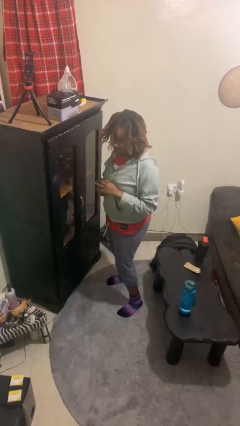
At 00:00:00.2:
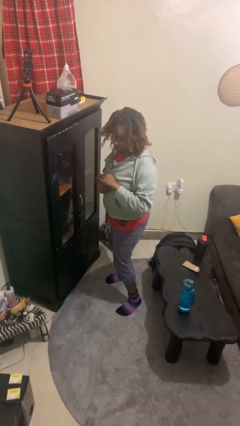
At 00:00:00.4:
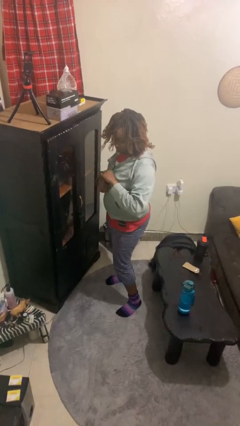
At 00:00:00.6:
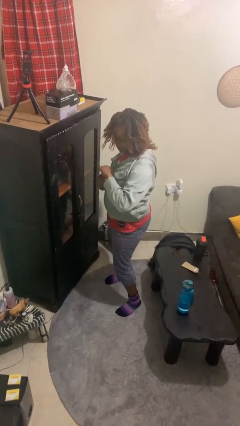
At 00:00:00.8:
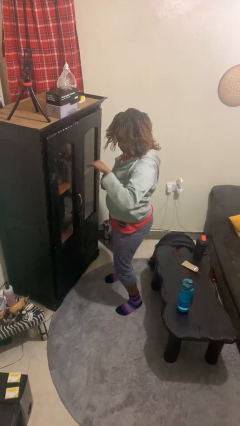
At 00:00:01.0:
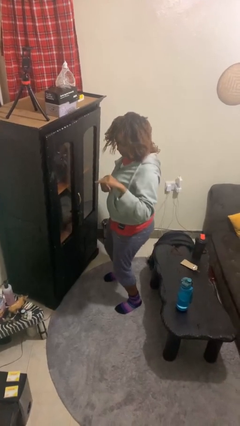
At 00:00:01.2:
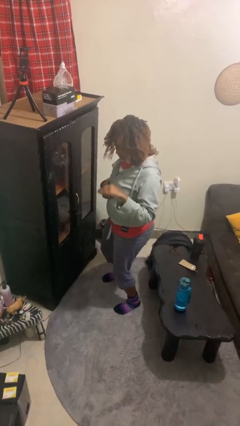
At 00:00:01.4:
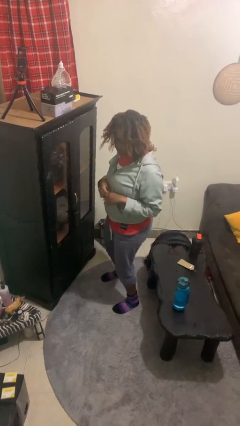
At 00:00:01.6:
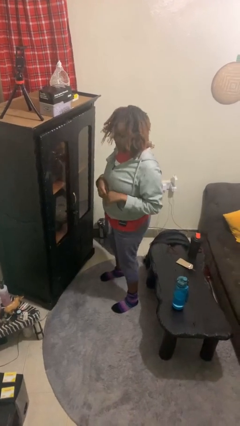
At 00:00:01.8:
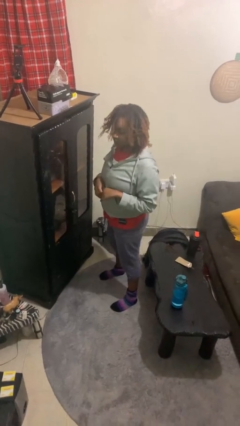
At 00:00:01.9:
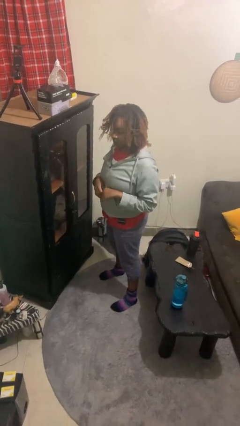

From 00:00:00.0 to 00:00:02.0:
person karate chop

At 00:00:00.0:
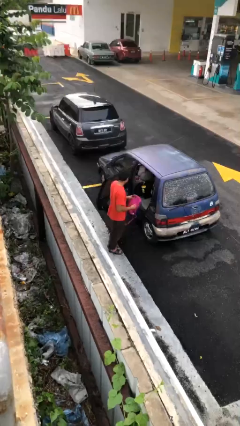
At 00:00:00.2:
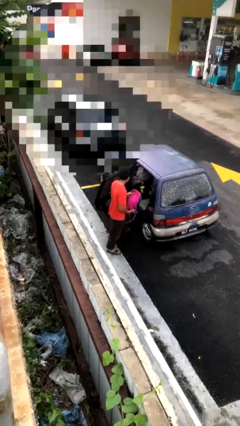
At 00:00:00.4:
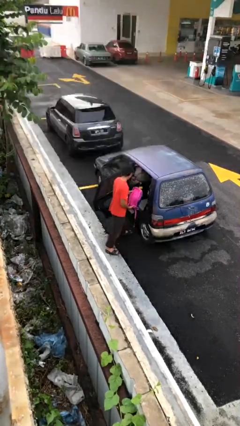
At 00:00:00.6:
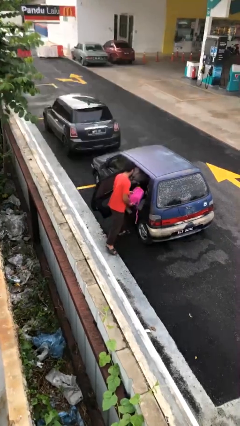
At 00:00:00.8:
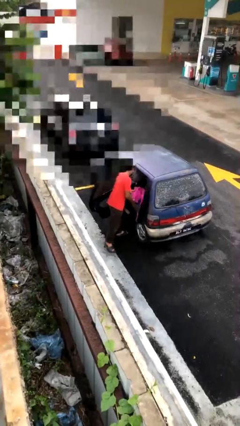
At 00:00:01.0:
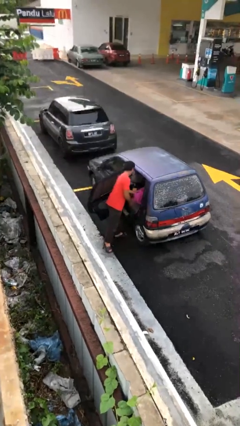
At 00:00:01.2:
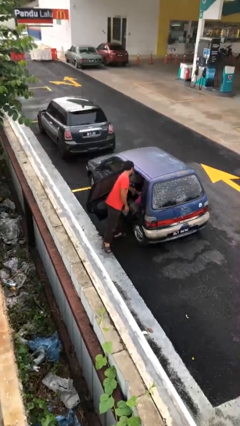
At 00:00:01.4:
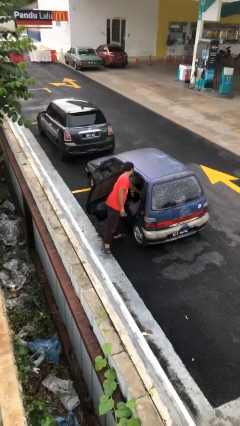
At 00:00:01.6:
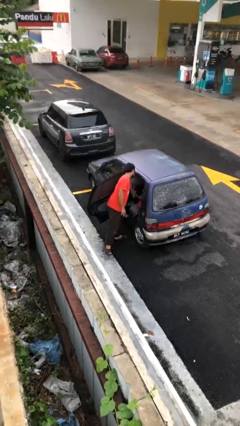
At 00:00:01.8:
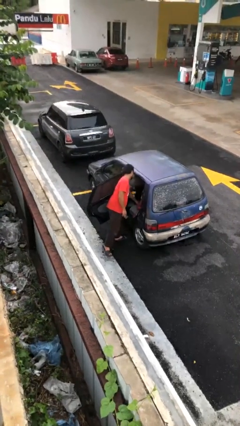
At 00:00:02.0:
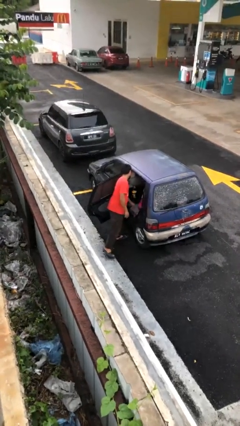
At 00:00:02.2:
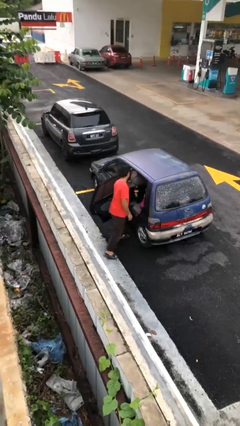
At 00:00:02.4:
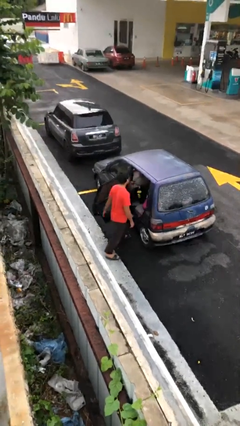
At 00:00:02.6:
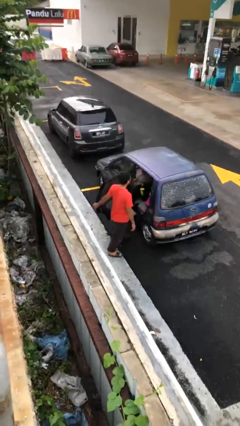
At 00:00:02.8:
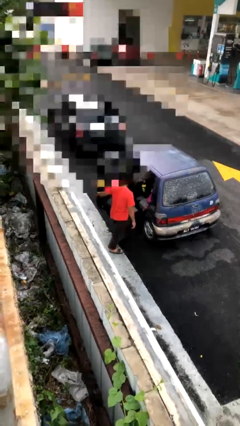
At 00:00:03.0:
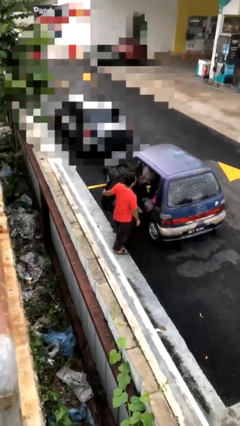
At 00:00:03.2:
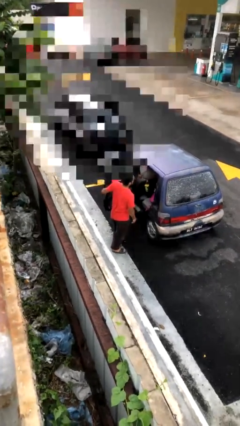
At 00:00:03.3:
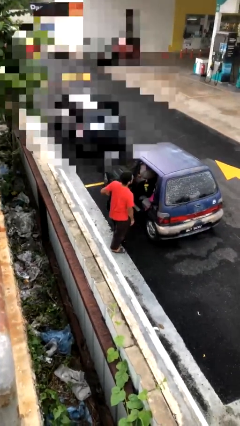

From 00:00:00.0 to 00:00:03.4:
person loads car

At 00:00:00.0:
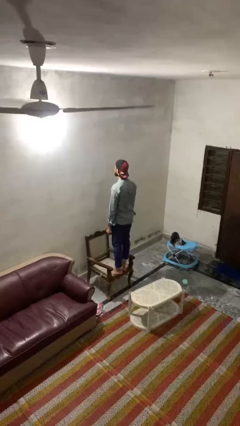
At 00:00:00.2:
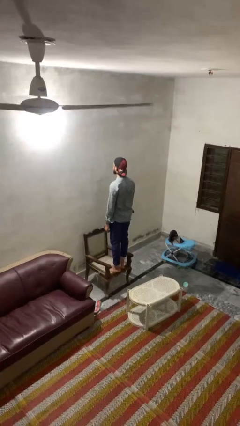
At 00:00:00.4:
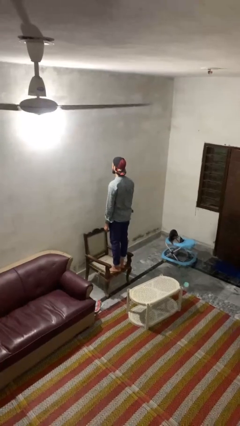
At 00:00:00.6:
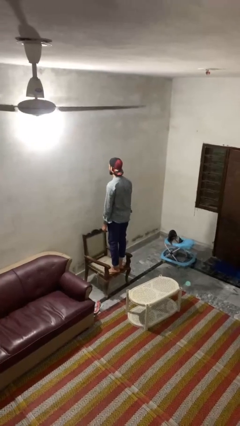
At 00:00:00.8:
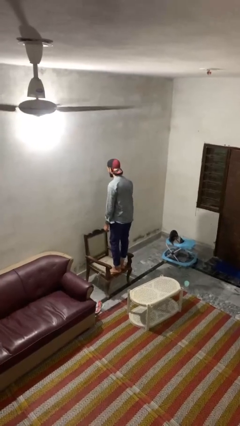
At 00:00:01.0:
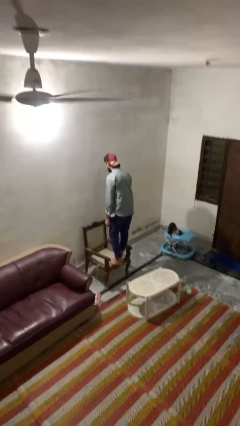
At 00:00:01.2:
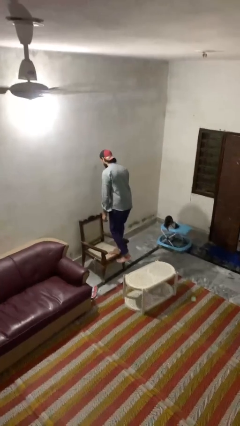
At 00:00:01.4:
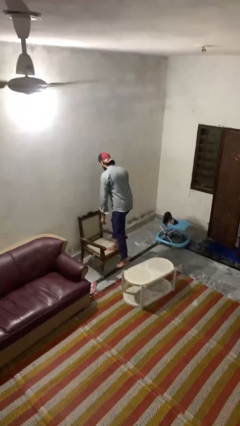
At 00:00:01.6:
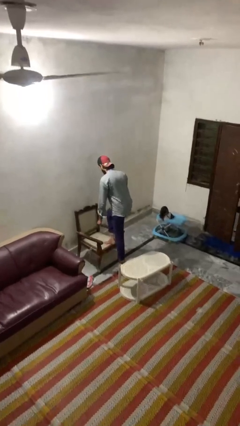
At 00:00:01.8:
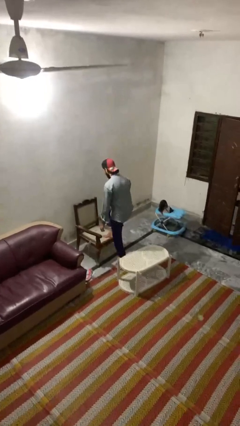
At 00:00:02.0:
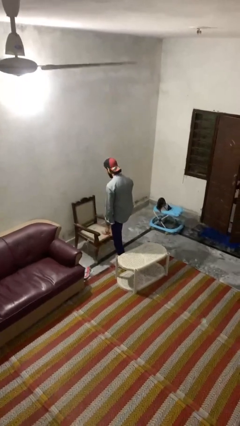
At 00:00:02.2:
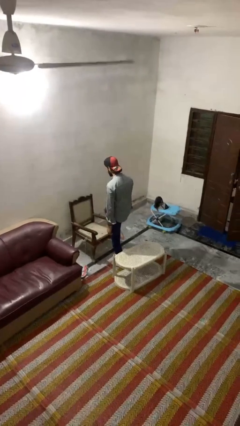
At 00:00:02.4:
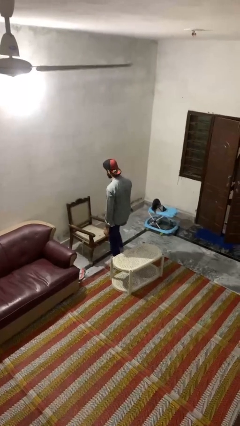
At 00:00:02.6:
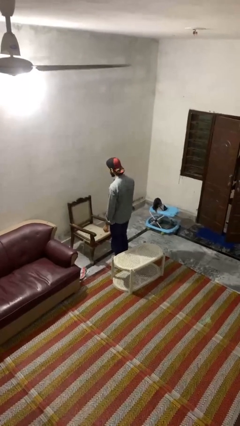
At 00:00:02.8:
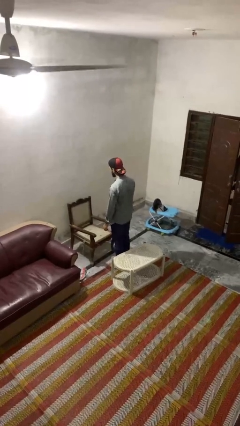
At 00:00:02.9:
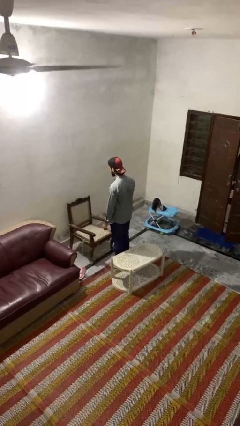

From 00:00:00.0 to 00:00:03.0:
person climbs off chair

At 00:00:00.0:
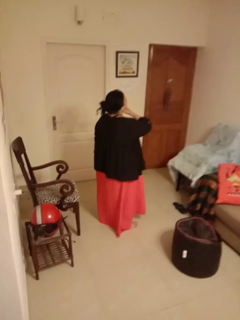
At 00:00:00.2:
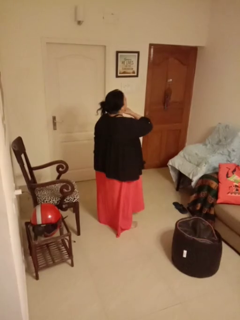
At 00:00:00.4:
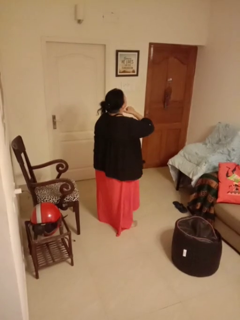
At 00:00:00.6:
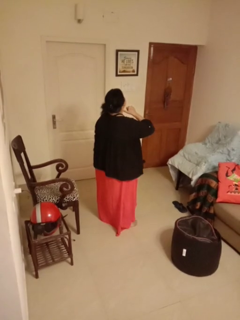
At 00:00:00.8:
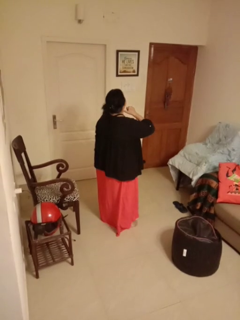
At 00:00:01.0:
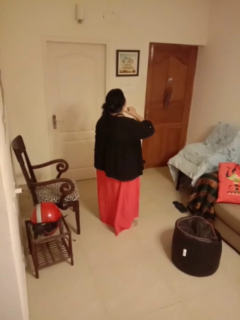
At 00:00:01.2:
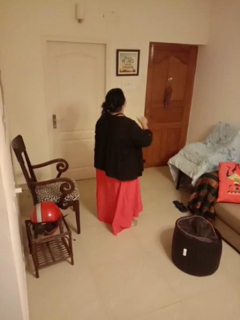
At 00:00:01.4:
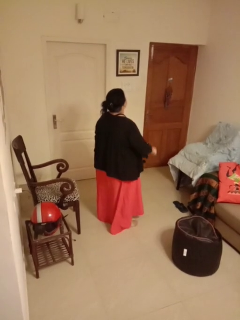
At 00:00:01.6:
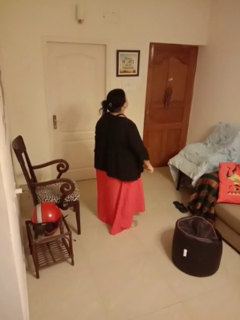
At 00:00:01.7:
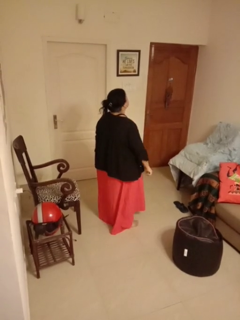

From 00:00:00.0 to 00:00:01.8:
person gestures cut

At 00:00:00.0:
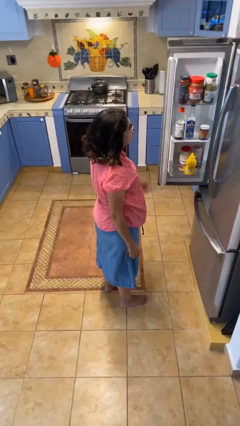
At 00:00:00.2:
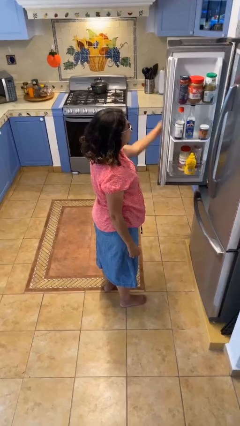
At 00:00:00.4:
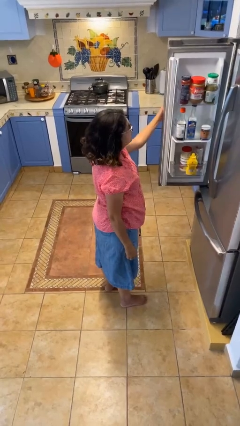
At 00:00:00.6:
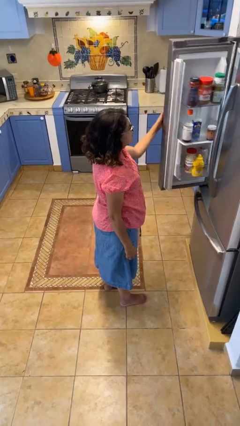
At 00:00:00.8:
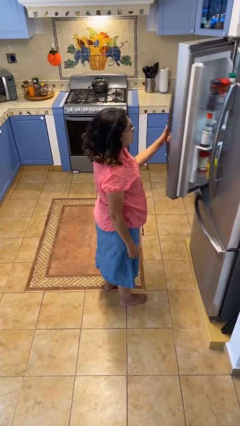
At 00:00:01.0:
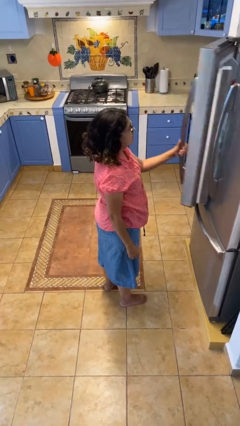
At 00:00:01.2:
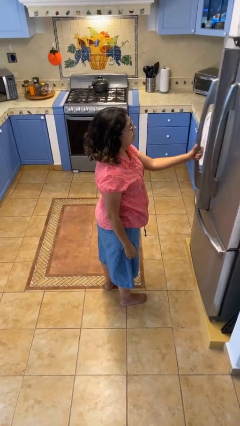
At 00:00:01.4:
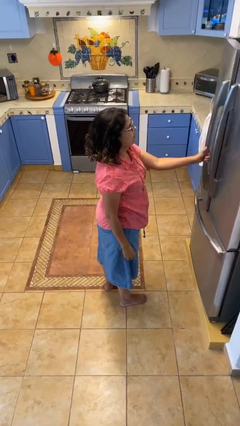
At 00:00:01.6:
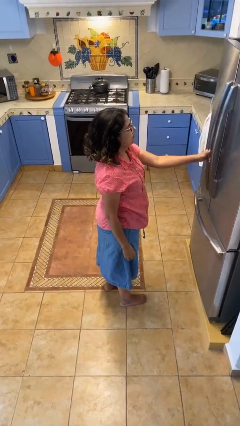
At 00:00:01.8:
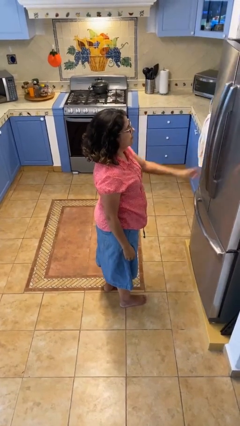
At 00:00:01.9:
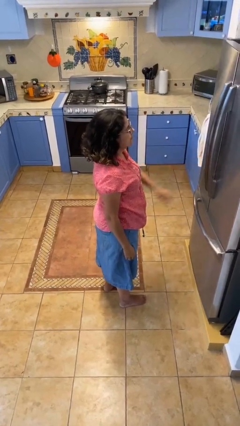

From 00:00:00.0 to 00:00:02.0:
person closes refrigerator

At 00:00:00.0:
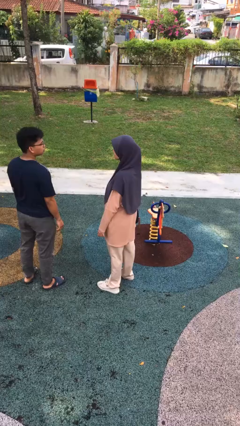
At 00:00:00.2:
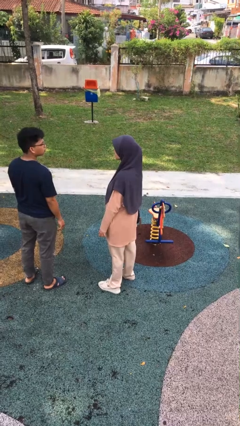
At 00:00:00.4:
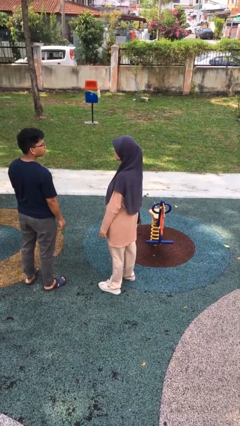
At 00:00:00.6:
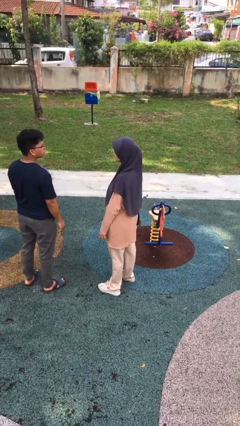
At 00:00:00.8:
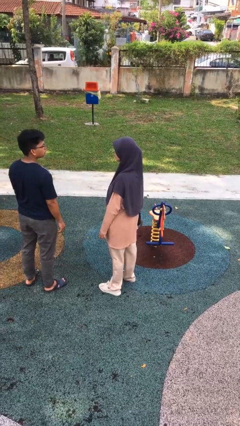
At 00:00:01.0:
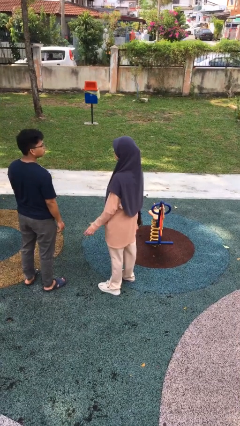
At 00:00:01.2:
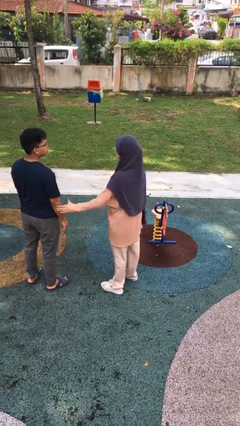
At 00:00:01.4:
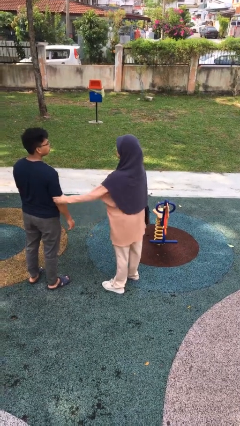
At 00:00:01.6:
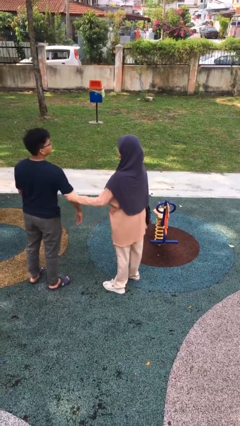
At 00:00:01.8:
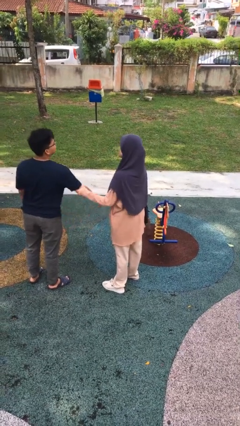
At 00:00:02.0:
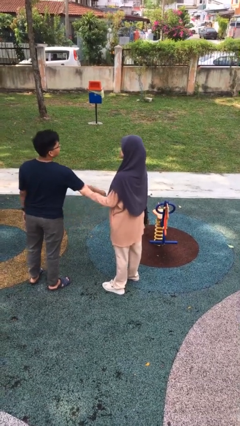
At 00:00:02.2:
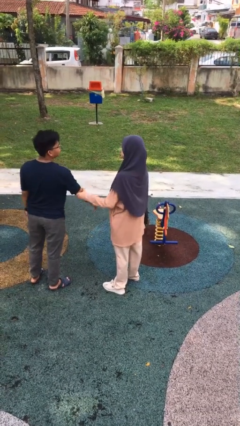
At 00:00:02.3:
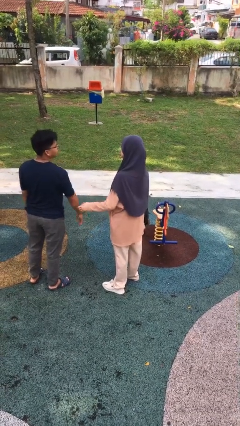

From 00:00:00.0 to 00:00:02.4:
person grabs person by bicep

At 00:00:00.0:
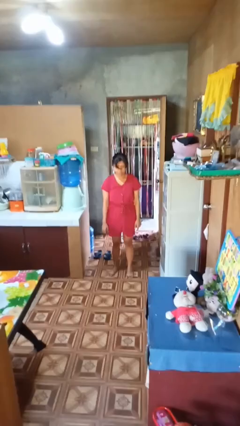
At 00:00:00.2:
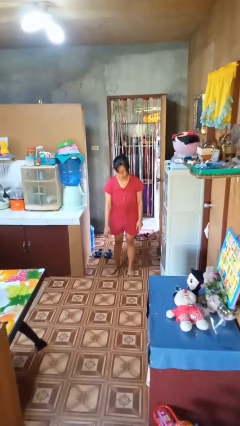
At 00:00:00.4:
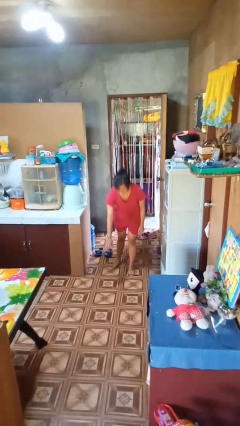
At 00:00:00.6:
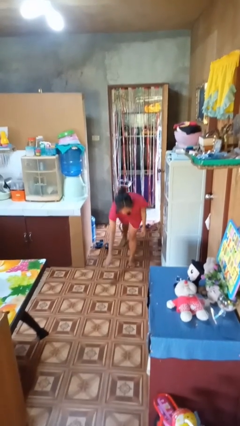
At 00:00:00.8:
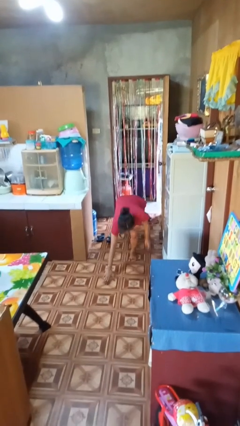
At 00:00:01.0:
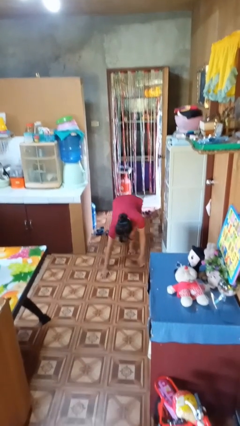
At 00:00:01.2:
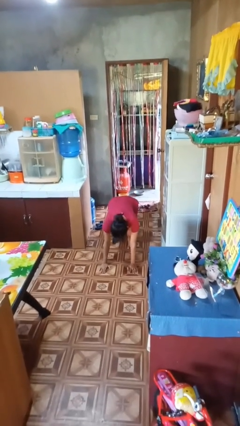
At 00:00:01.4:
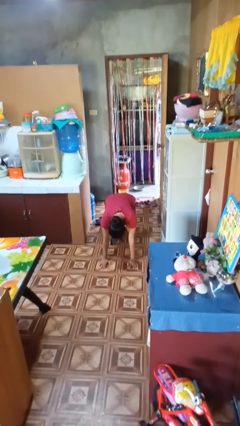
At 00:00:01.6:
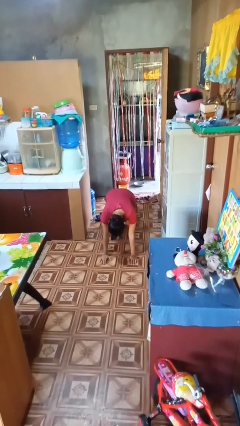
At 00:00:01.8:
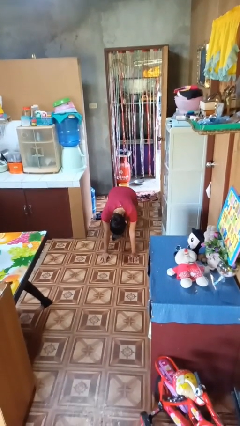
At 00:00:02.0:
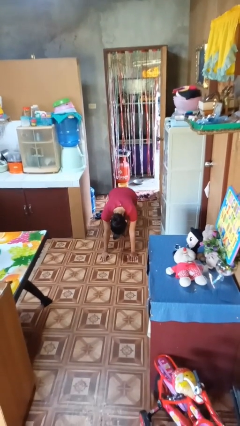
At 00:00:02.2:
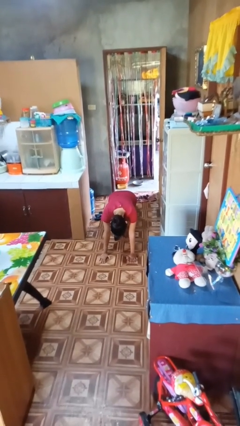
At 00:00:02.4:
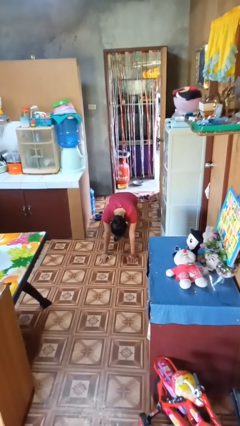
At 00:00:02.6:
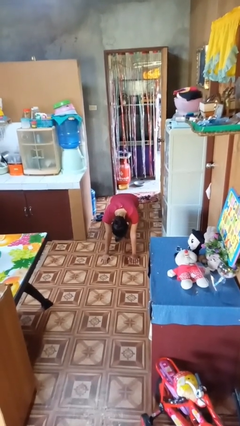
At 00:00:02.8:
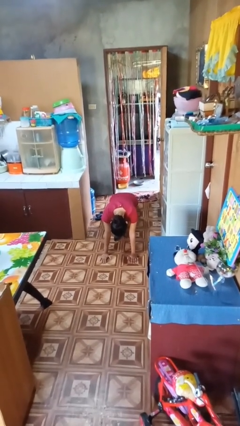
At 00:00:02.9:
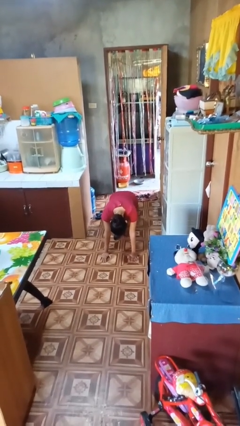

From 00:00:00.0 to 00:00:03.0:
person exercises with plank
